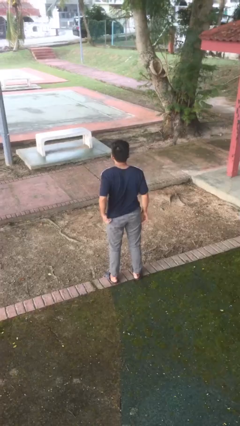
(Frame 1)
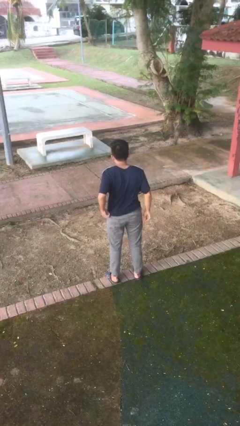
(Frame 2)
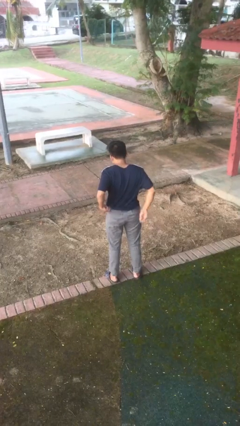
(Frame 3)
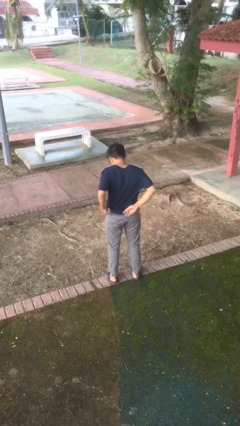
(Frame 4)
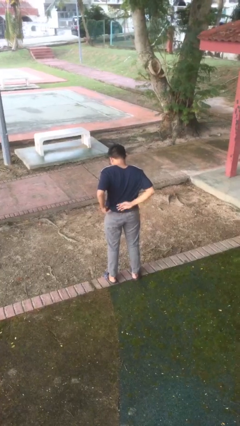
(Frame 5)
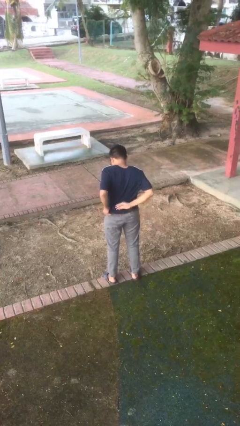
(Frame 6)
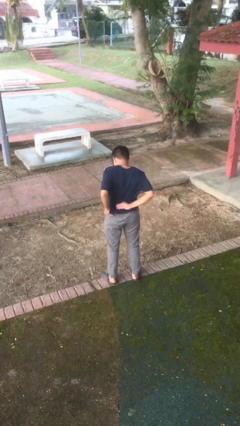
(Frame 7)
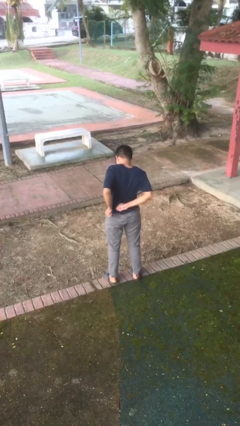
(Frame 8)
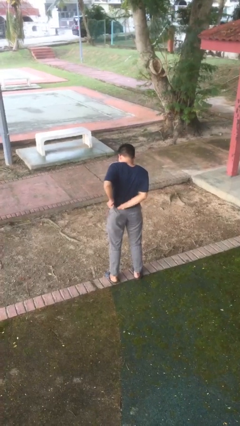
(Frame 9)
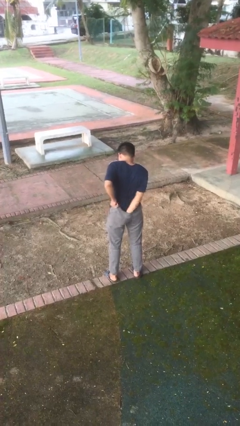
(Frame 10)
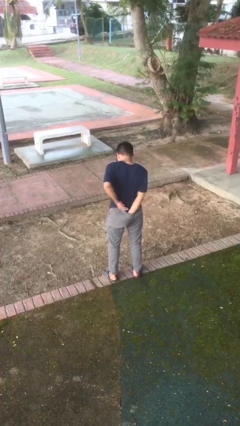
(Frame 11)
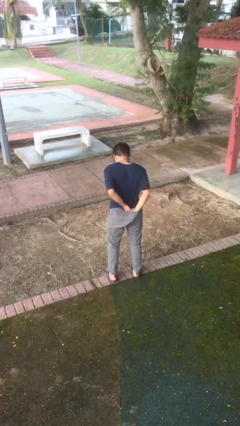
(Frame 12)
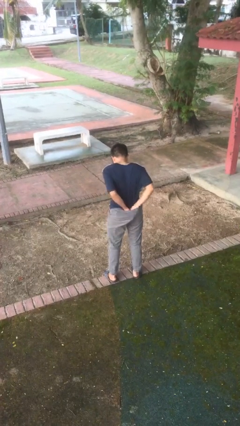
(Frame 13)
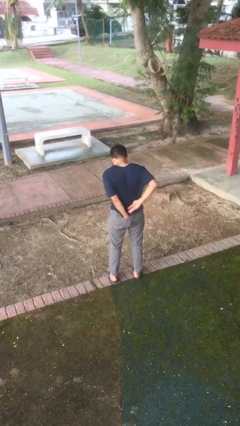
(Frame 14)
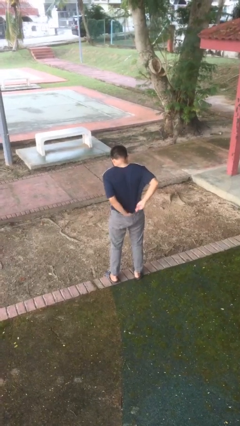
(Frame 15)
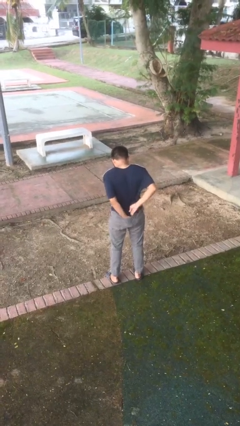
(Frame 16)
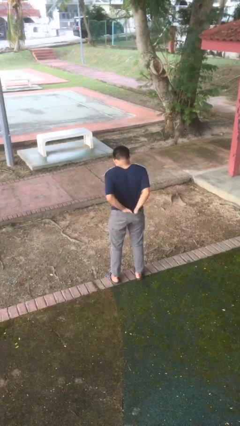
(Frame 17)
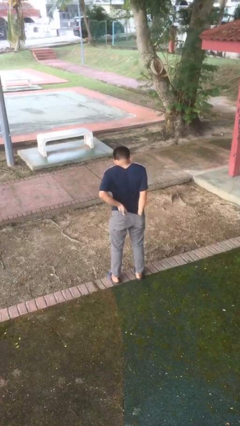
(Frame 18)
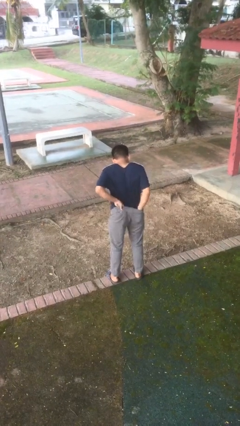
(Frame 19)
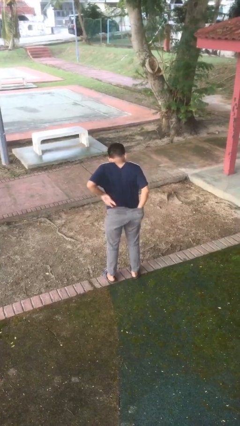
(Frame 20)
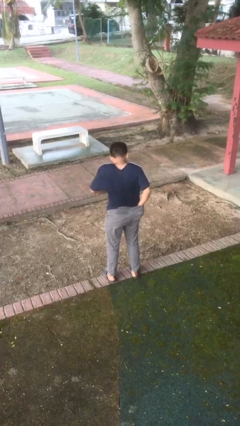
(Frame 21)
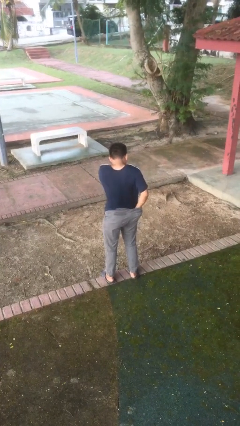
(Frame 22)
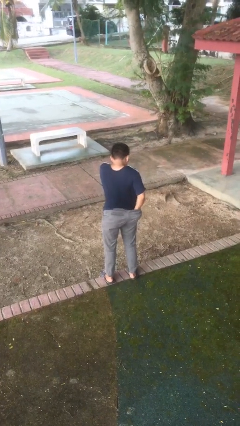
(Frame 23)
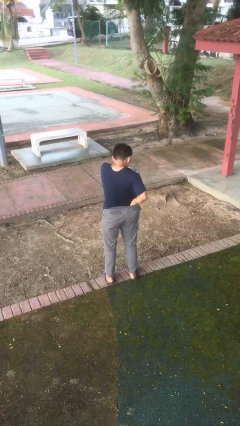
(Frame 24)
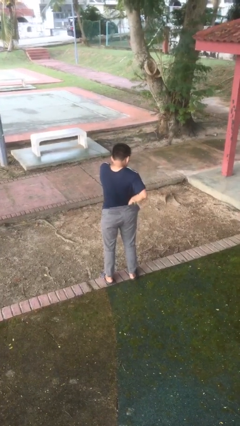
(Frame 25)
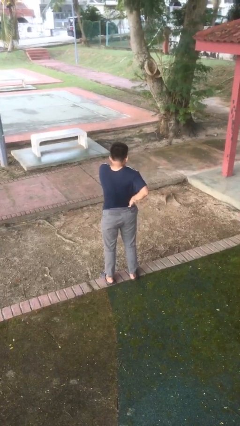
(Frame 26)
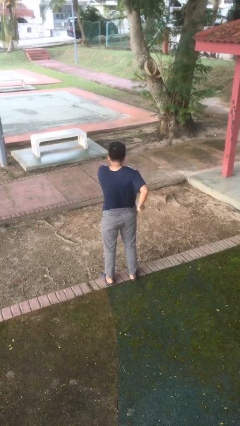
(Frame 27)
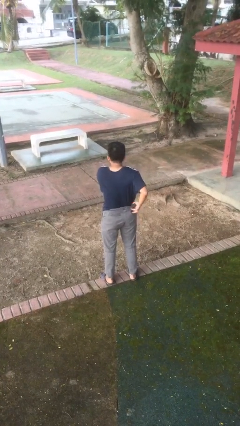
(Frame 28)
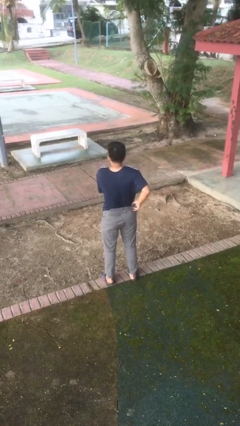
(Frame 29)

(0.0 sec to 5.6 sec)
person tucks in shirt

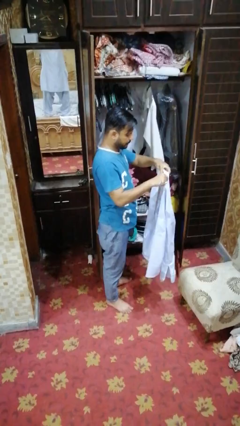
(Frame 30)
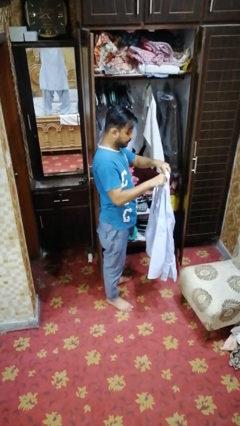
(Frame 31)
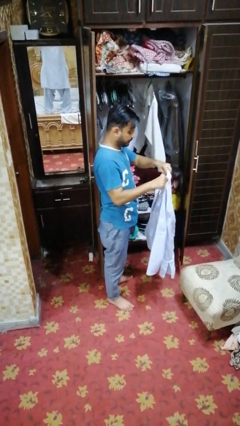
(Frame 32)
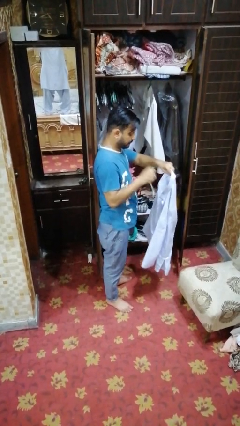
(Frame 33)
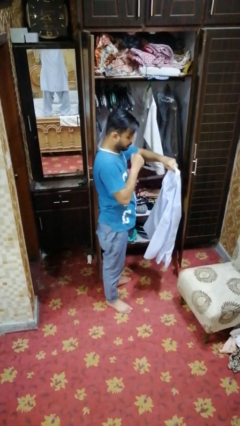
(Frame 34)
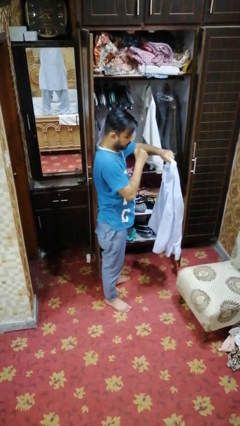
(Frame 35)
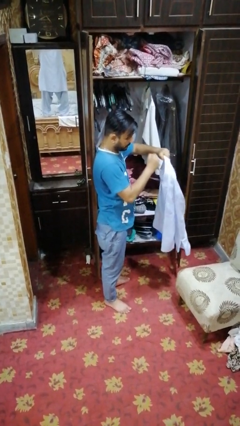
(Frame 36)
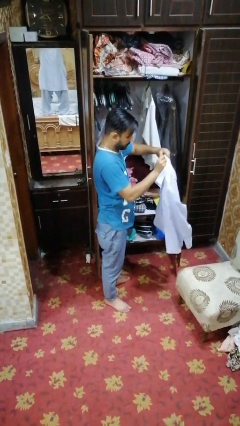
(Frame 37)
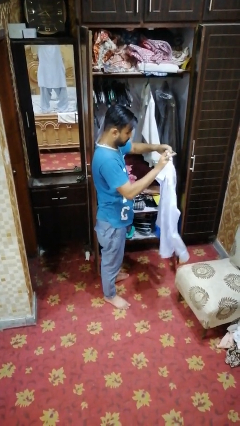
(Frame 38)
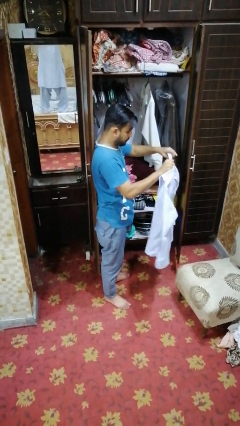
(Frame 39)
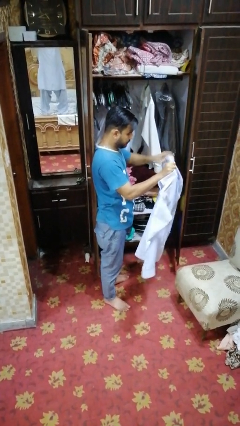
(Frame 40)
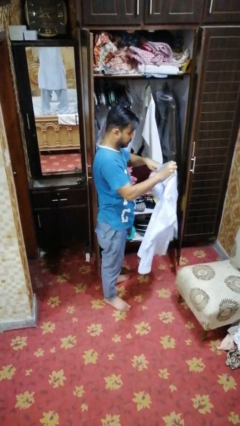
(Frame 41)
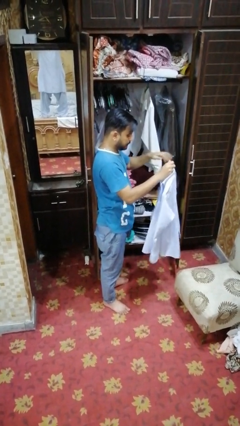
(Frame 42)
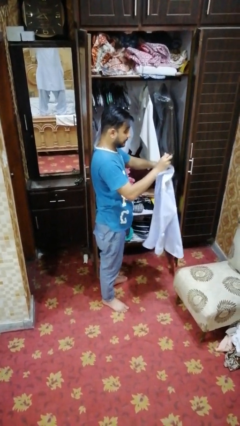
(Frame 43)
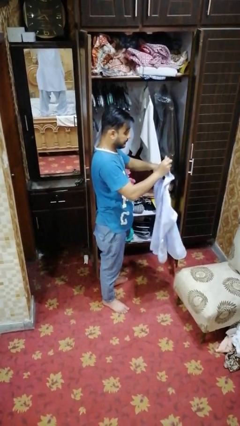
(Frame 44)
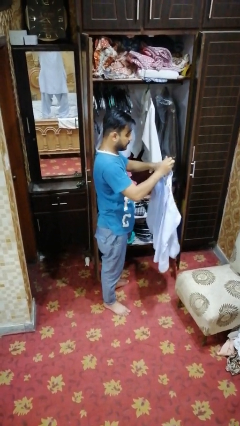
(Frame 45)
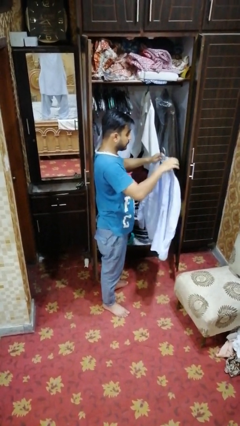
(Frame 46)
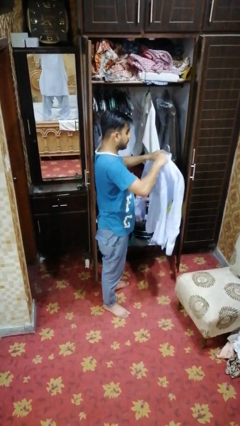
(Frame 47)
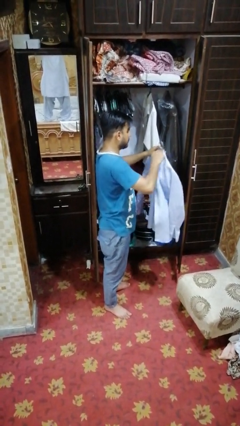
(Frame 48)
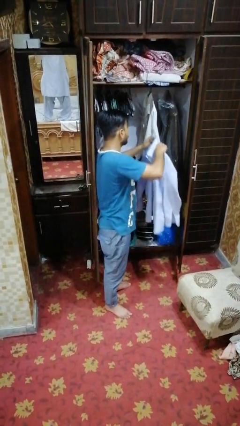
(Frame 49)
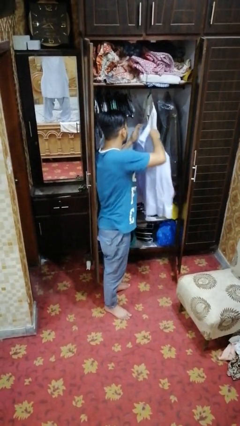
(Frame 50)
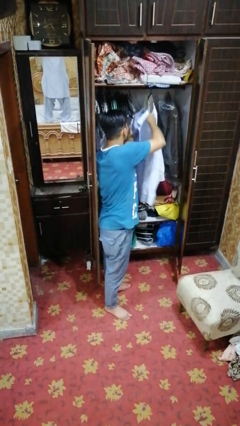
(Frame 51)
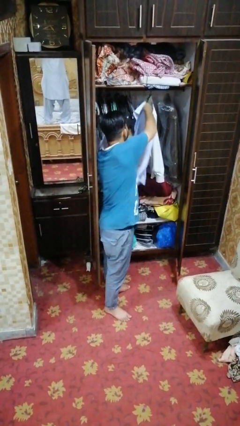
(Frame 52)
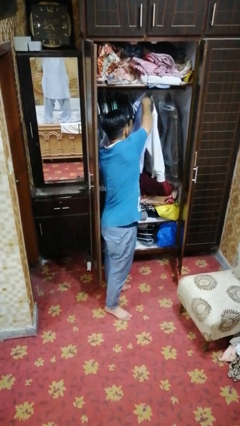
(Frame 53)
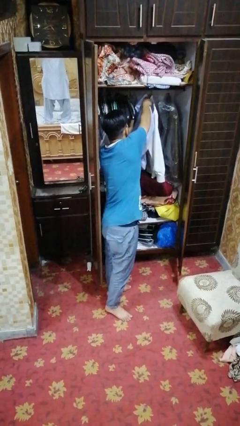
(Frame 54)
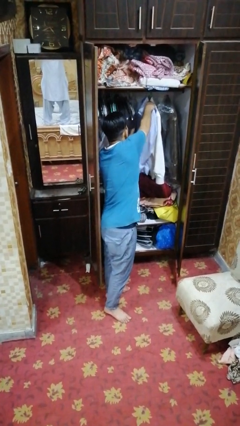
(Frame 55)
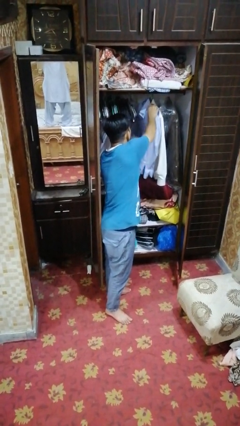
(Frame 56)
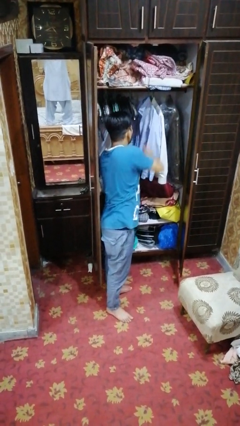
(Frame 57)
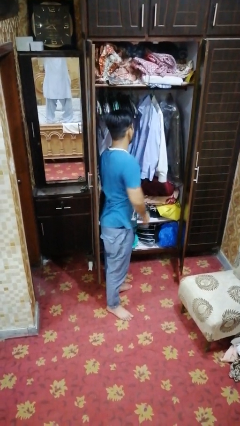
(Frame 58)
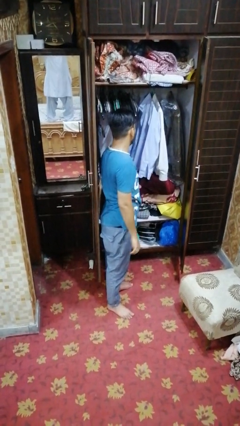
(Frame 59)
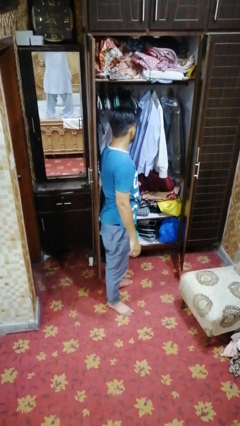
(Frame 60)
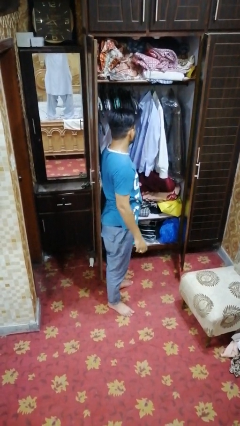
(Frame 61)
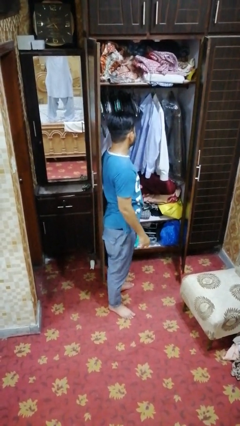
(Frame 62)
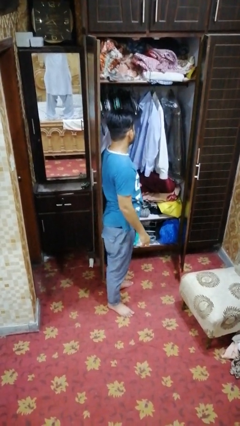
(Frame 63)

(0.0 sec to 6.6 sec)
person puts clothes into closet

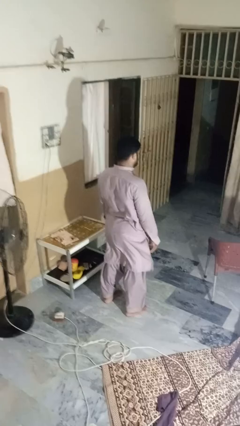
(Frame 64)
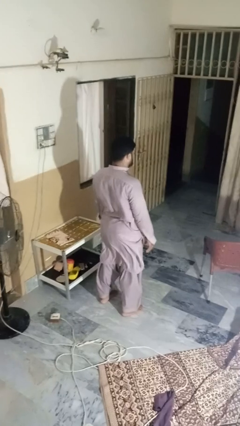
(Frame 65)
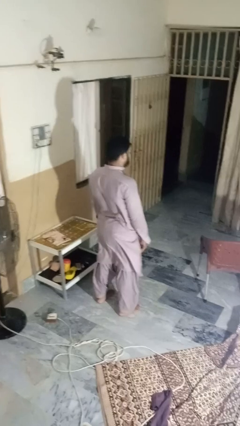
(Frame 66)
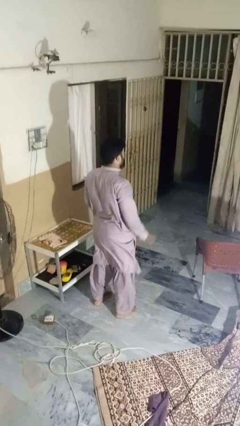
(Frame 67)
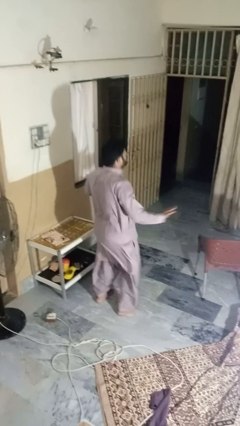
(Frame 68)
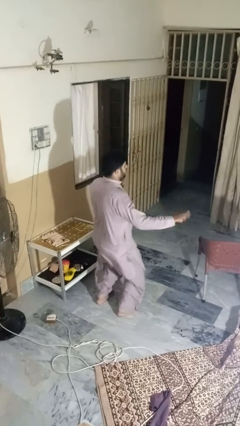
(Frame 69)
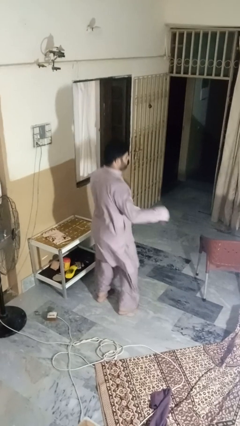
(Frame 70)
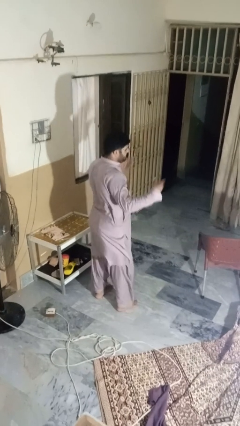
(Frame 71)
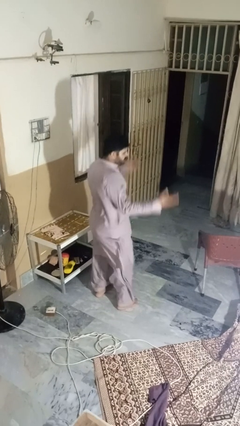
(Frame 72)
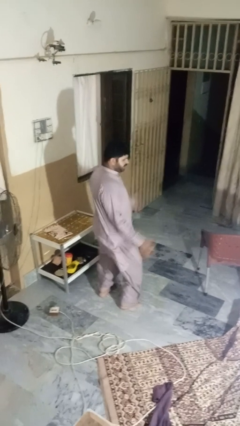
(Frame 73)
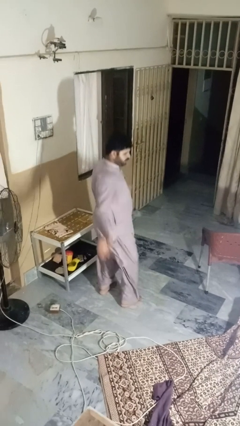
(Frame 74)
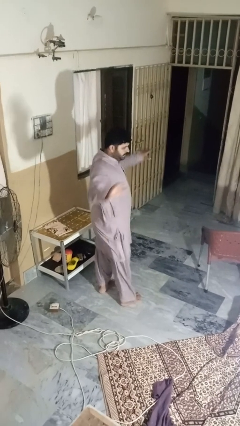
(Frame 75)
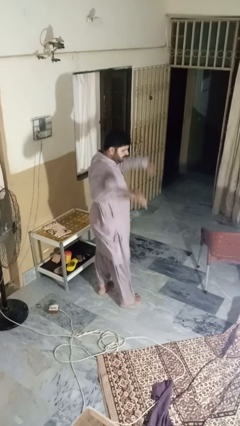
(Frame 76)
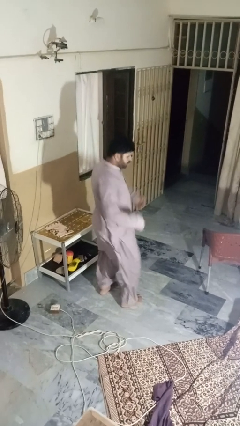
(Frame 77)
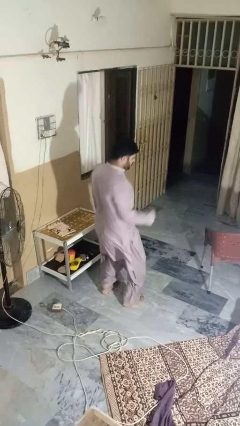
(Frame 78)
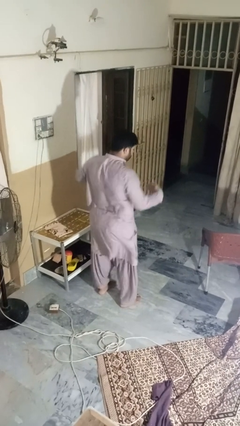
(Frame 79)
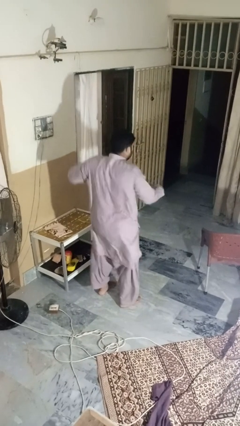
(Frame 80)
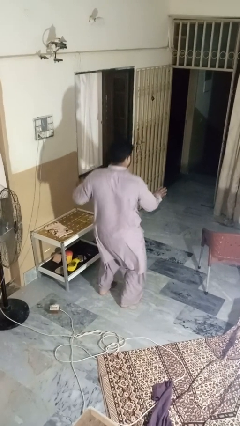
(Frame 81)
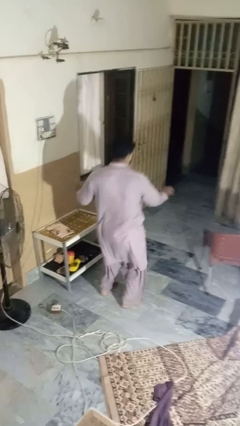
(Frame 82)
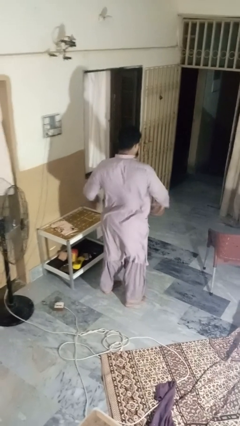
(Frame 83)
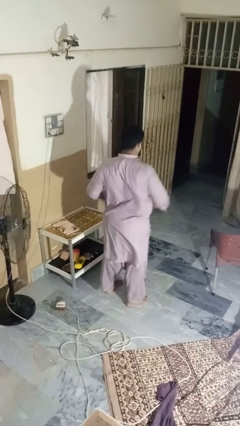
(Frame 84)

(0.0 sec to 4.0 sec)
person dances in place

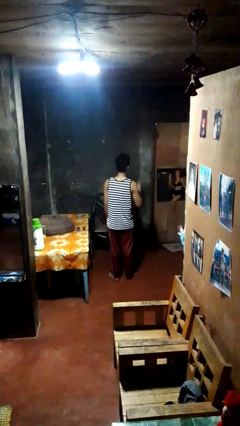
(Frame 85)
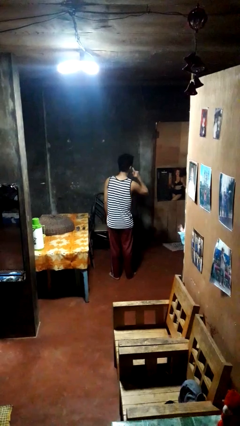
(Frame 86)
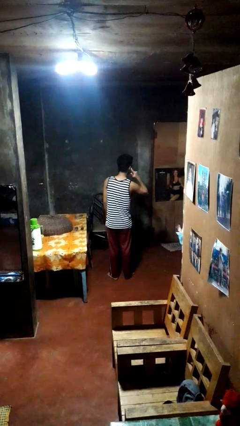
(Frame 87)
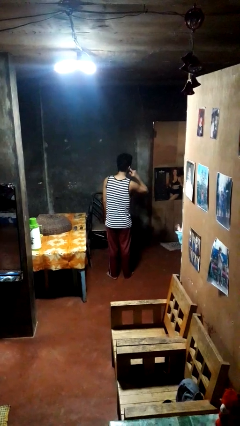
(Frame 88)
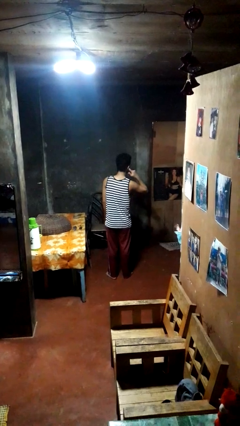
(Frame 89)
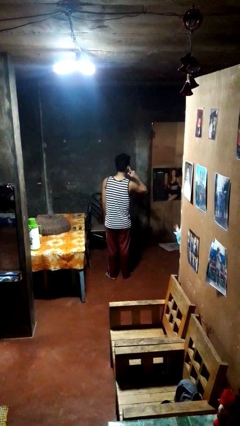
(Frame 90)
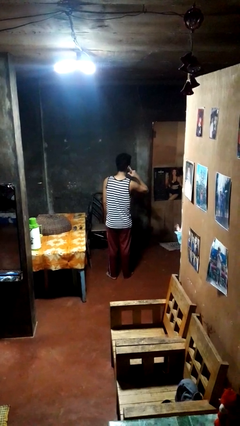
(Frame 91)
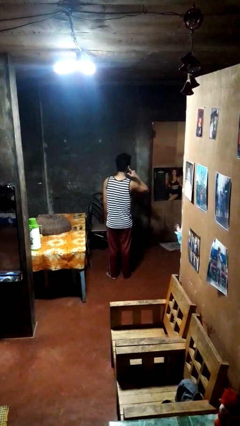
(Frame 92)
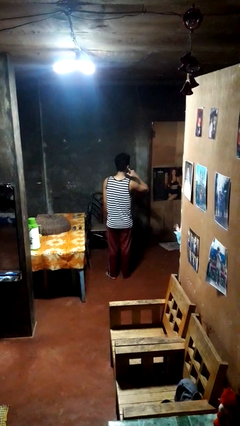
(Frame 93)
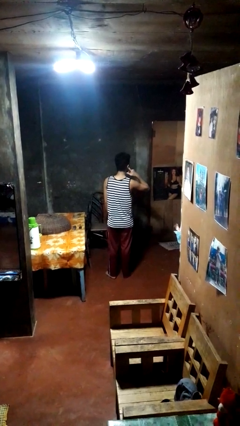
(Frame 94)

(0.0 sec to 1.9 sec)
person gestures listen closely
